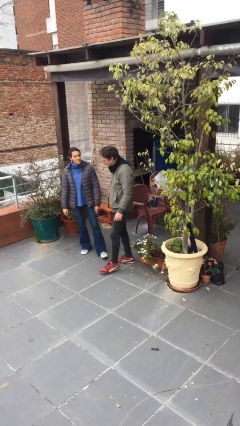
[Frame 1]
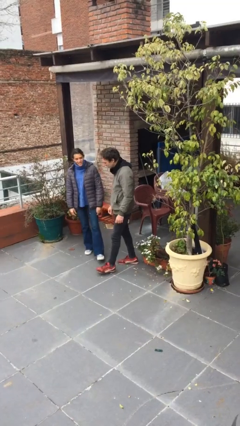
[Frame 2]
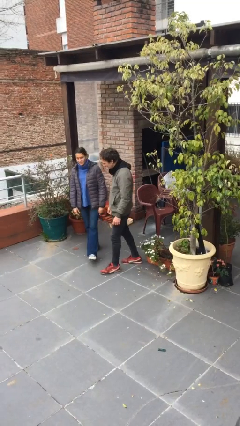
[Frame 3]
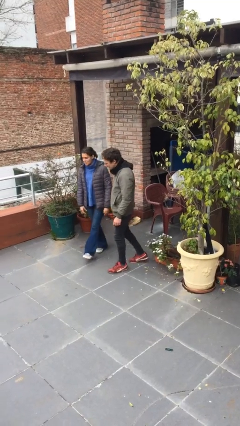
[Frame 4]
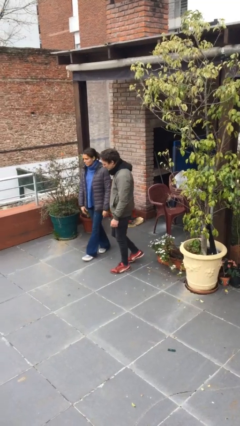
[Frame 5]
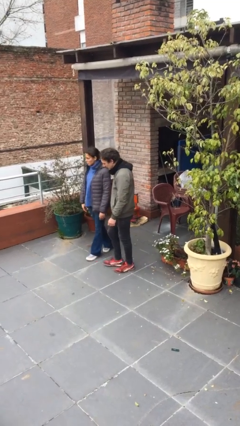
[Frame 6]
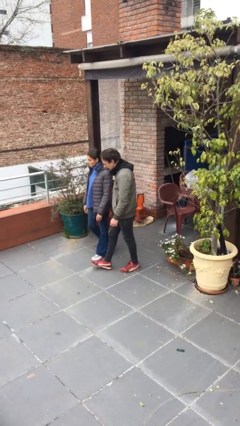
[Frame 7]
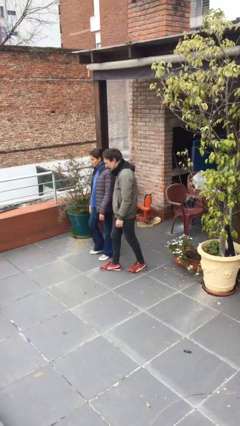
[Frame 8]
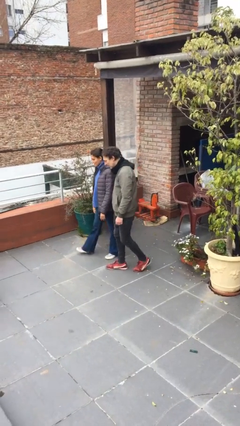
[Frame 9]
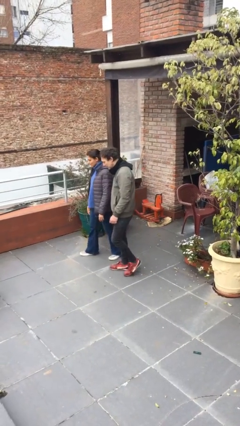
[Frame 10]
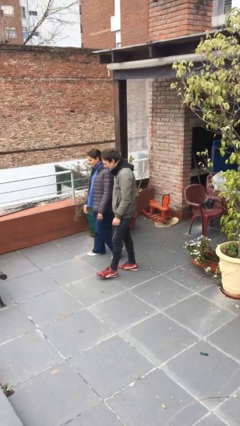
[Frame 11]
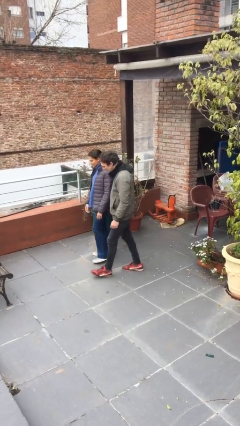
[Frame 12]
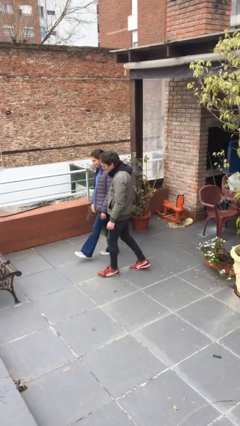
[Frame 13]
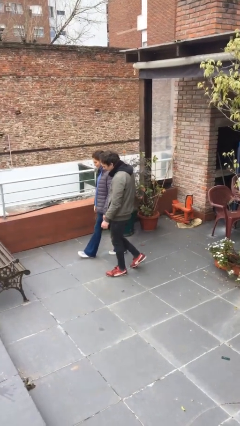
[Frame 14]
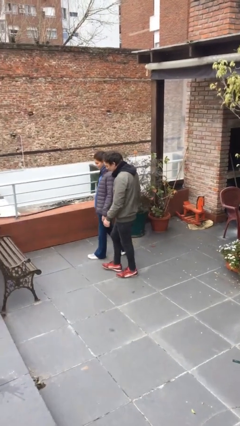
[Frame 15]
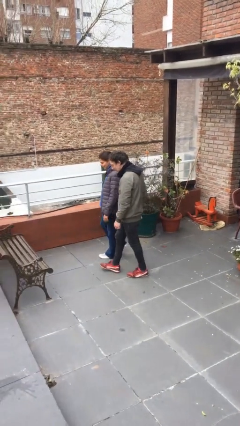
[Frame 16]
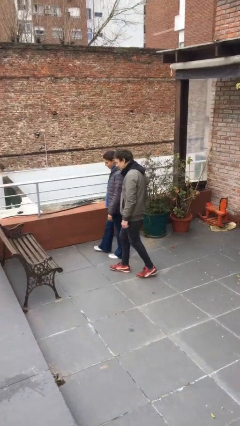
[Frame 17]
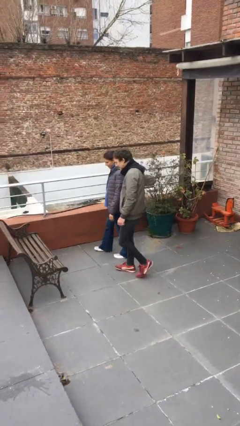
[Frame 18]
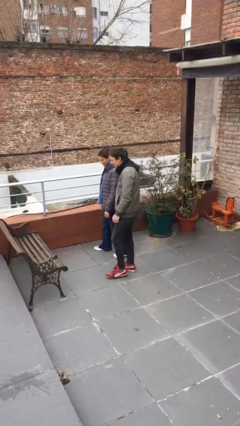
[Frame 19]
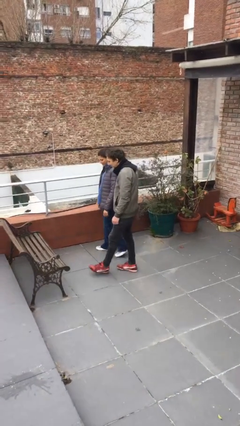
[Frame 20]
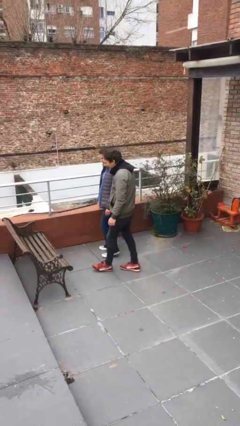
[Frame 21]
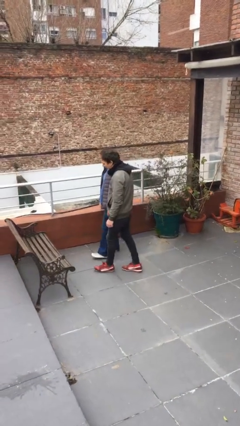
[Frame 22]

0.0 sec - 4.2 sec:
person talks to person

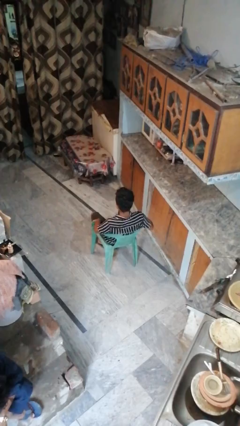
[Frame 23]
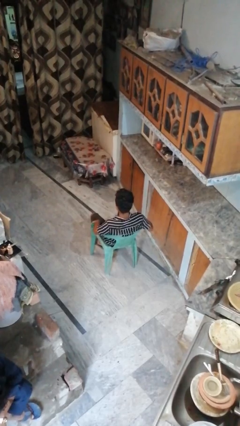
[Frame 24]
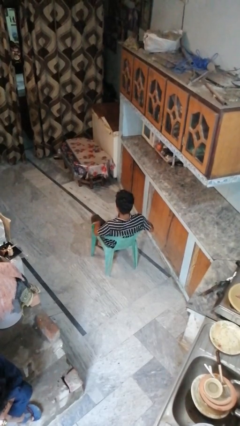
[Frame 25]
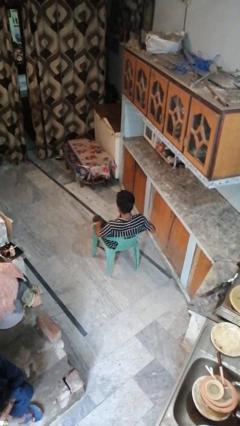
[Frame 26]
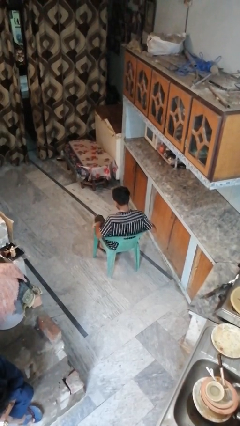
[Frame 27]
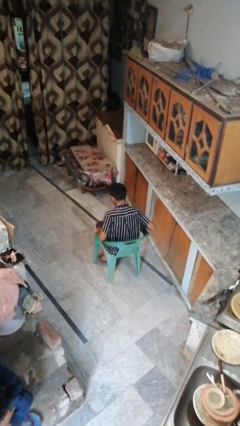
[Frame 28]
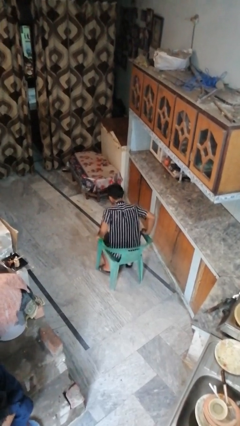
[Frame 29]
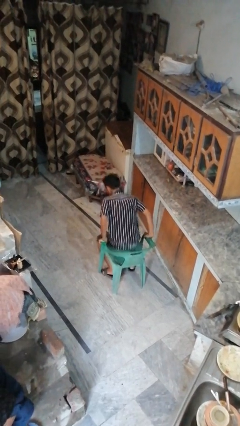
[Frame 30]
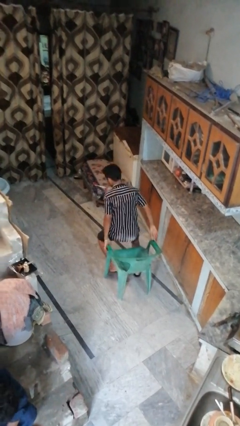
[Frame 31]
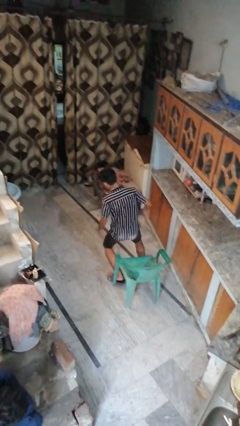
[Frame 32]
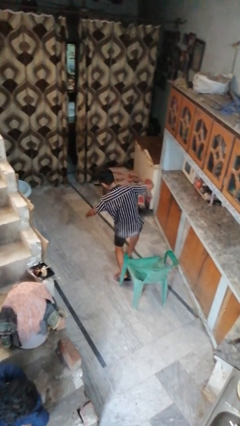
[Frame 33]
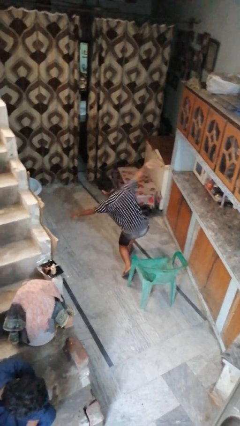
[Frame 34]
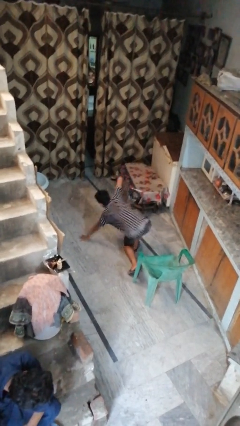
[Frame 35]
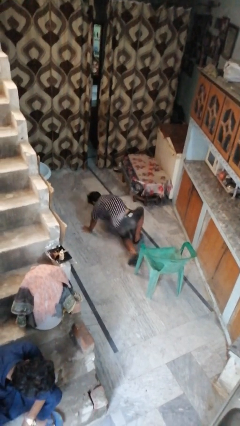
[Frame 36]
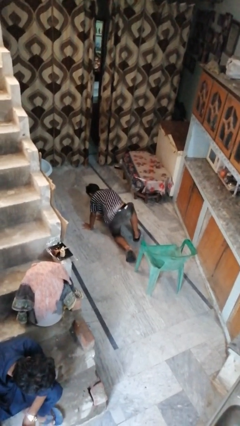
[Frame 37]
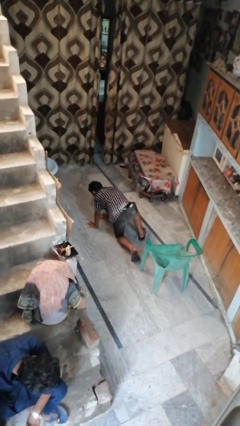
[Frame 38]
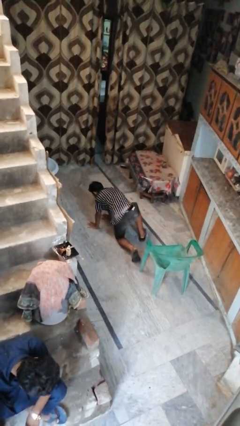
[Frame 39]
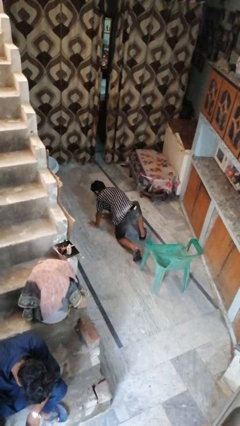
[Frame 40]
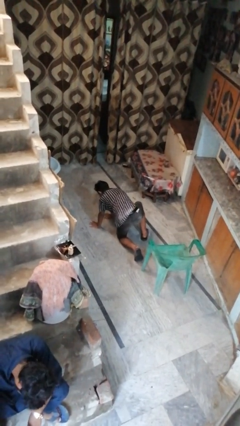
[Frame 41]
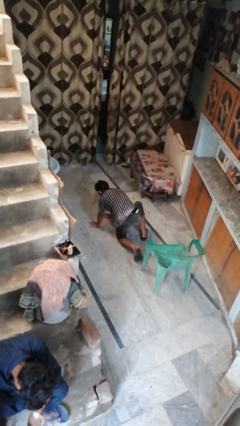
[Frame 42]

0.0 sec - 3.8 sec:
person falls from chair

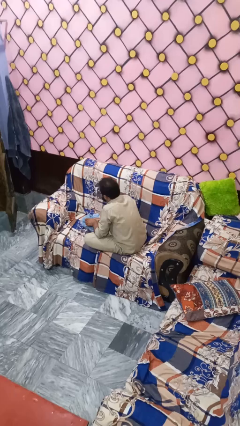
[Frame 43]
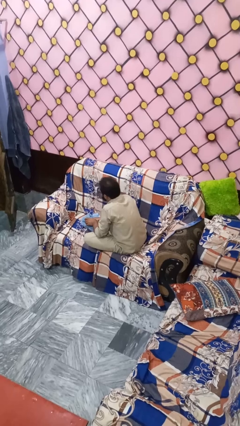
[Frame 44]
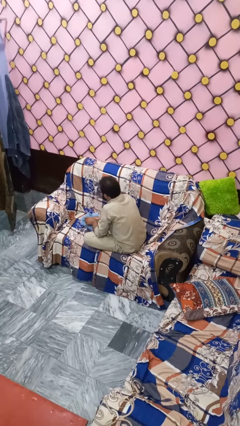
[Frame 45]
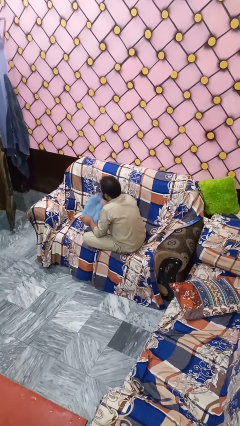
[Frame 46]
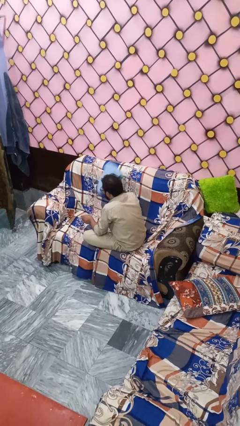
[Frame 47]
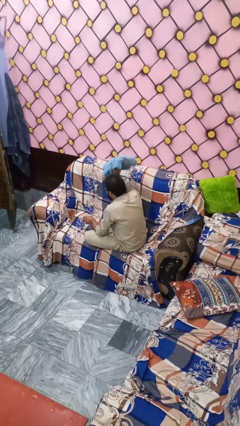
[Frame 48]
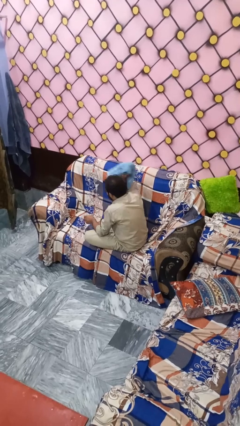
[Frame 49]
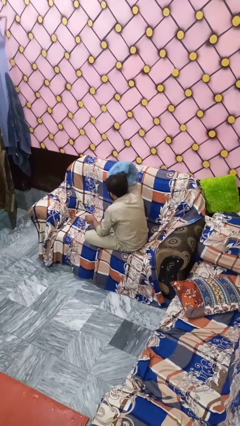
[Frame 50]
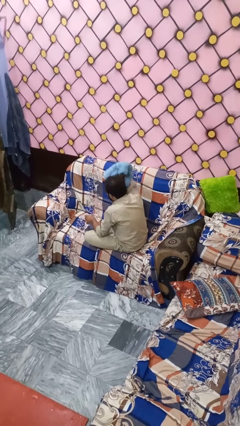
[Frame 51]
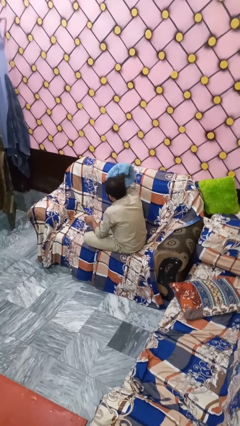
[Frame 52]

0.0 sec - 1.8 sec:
person dries hair with towel

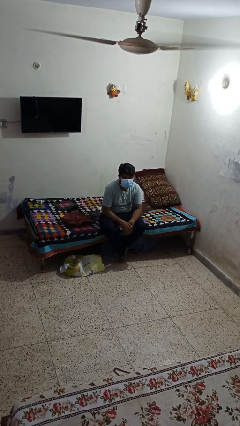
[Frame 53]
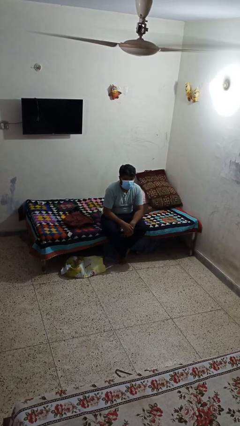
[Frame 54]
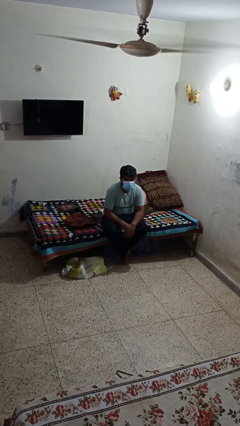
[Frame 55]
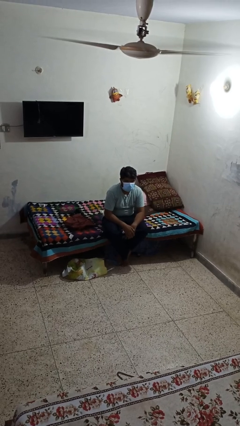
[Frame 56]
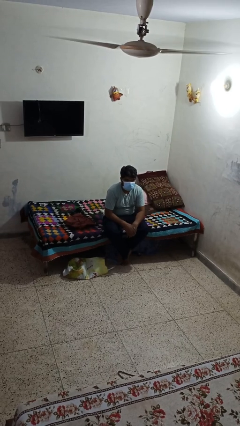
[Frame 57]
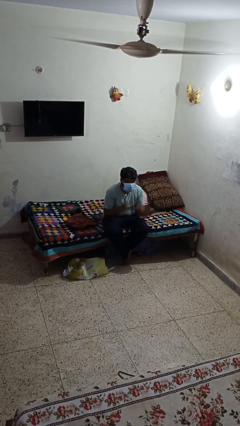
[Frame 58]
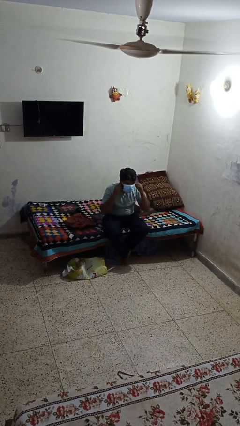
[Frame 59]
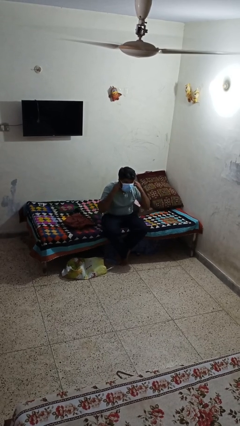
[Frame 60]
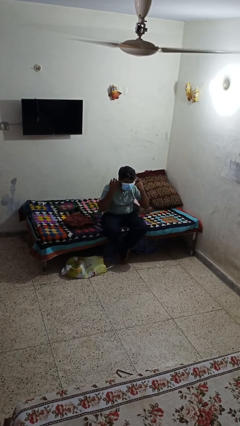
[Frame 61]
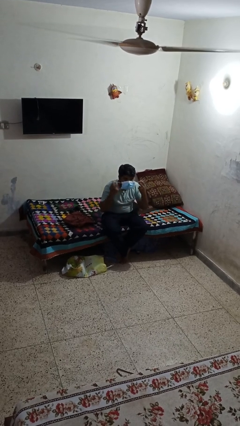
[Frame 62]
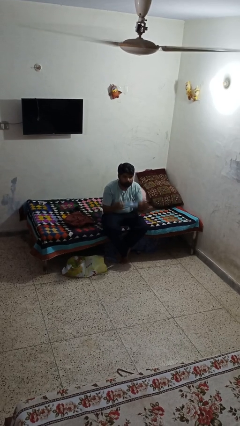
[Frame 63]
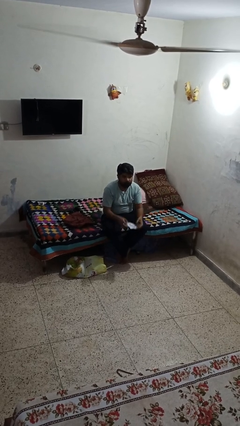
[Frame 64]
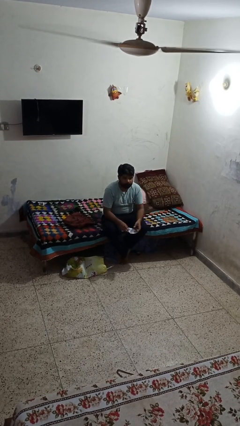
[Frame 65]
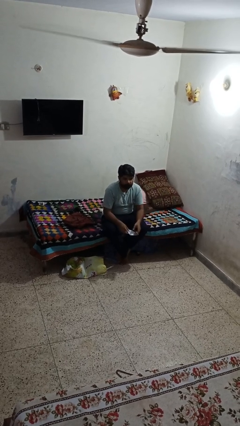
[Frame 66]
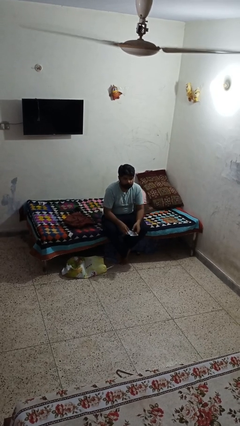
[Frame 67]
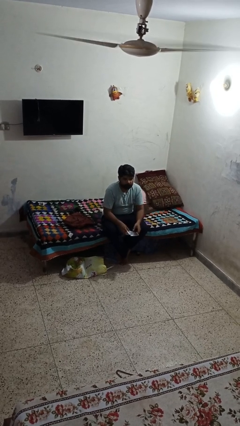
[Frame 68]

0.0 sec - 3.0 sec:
person takes off facemask

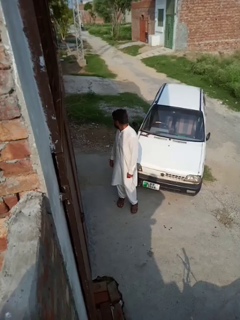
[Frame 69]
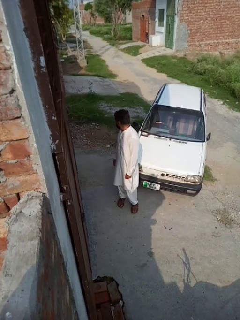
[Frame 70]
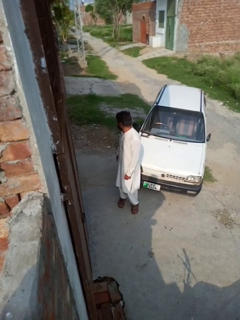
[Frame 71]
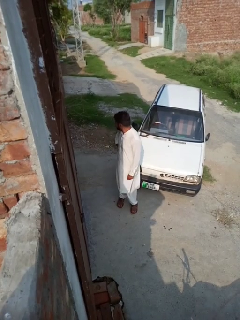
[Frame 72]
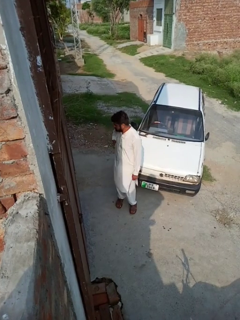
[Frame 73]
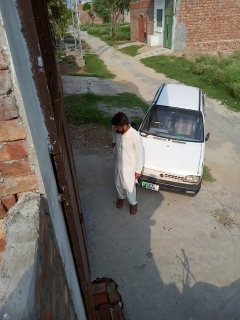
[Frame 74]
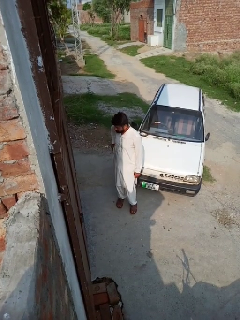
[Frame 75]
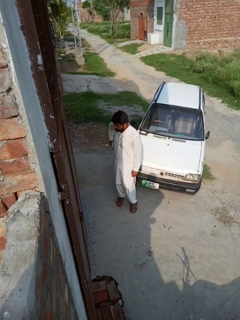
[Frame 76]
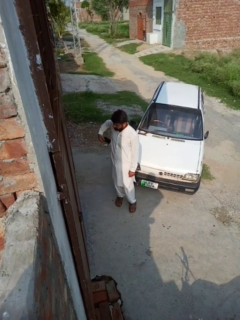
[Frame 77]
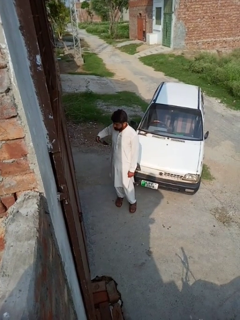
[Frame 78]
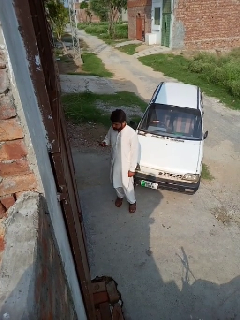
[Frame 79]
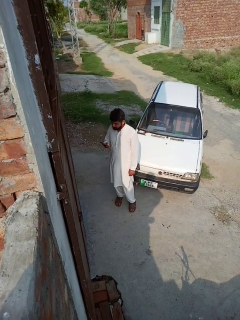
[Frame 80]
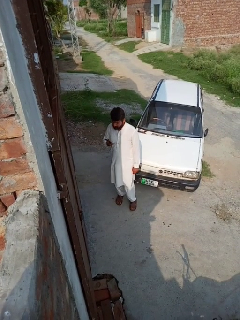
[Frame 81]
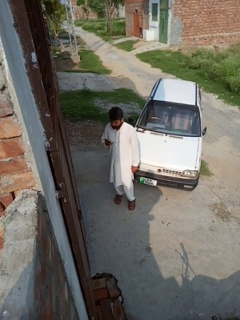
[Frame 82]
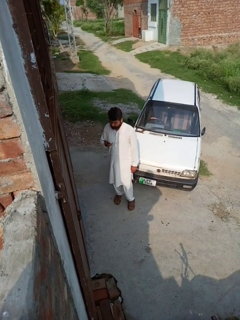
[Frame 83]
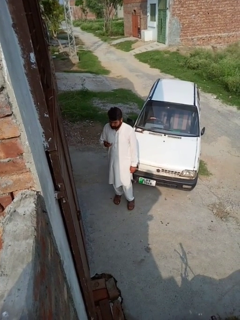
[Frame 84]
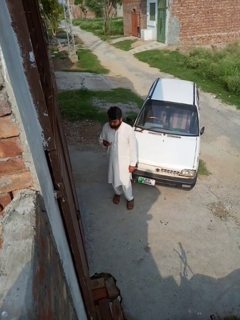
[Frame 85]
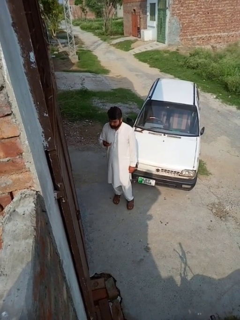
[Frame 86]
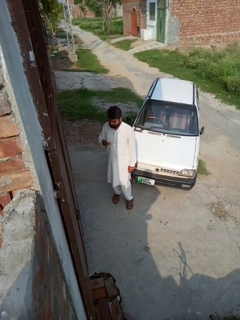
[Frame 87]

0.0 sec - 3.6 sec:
person takes phone from pocket

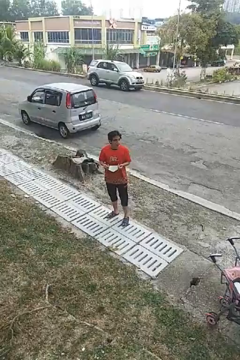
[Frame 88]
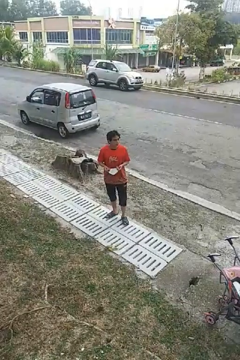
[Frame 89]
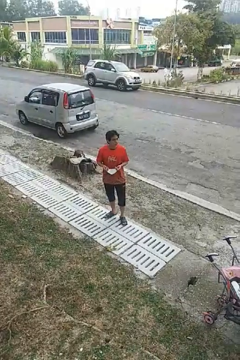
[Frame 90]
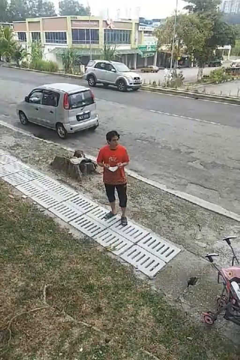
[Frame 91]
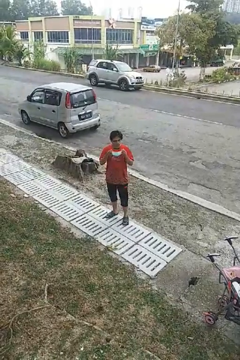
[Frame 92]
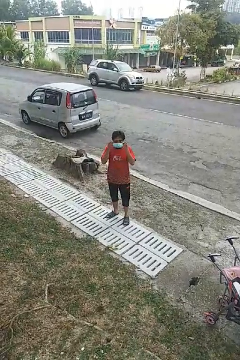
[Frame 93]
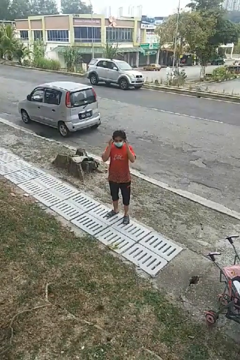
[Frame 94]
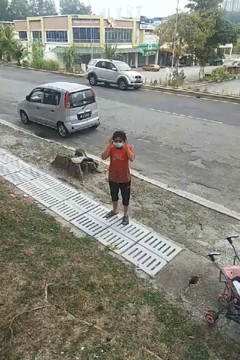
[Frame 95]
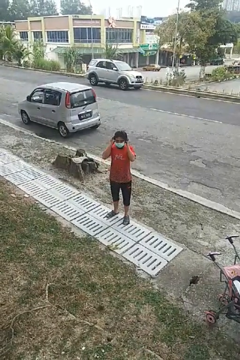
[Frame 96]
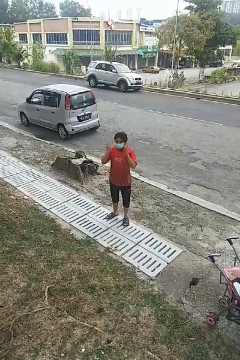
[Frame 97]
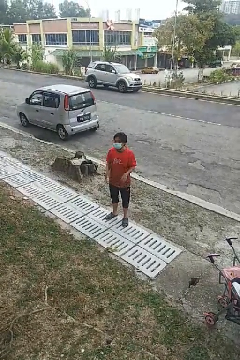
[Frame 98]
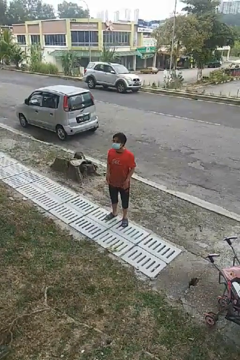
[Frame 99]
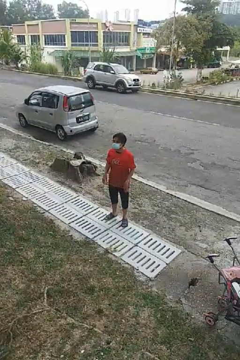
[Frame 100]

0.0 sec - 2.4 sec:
person puts on facemask
